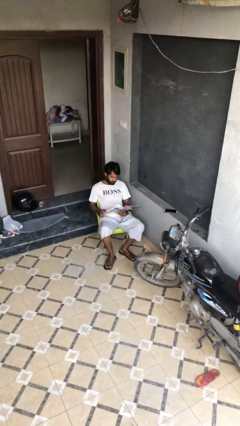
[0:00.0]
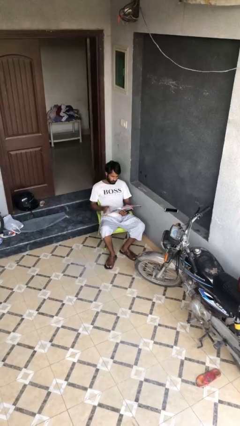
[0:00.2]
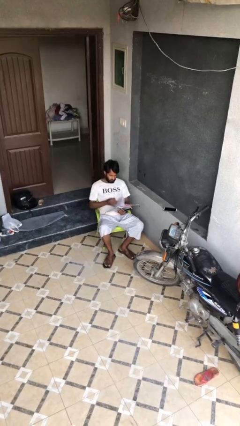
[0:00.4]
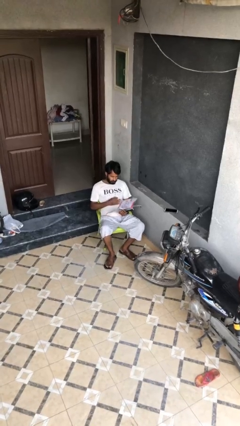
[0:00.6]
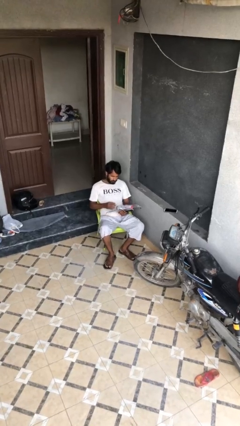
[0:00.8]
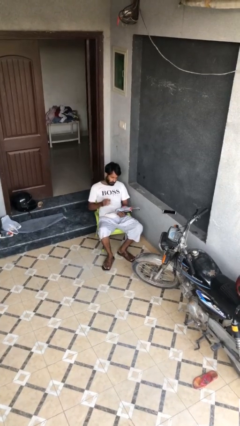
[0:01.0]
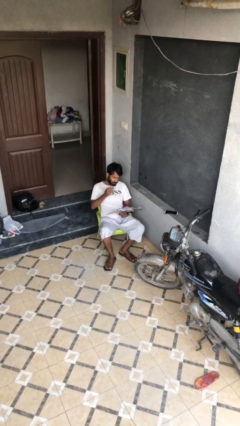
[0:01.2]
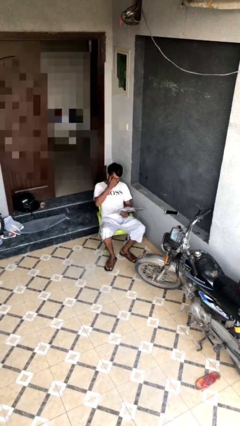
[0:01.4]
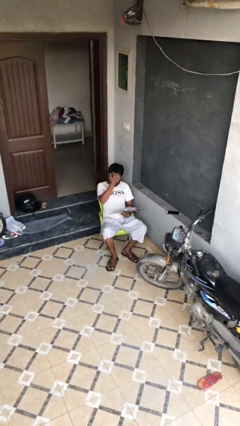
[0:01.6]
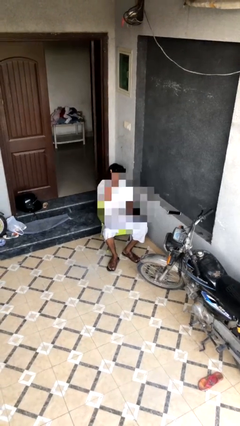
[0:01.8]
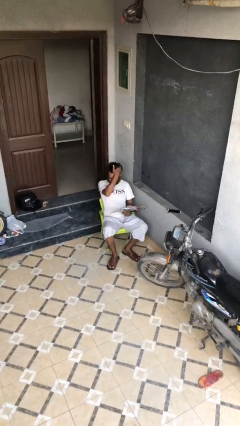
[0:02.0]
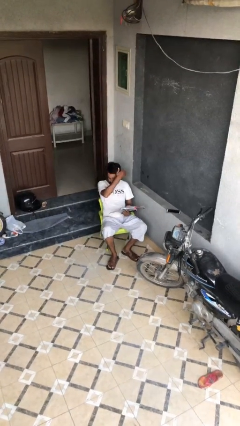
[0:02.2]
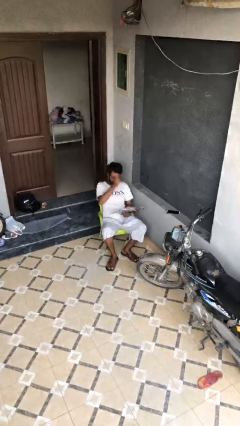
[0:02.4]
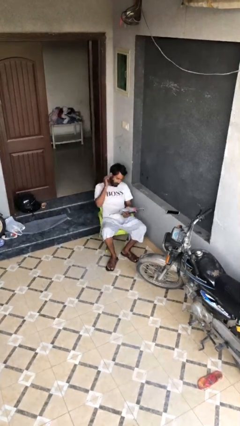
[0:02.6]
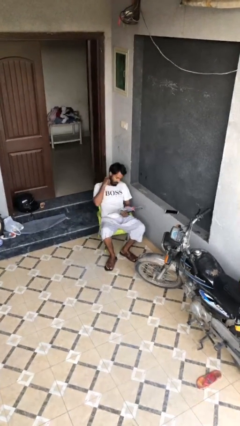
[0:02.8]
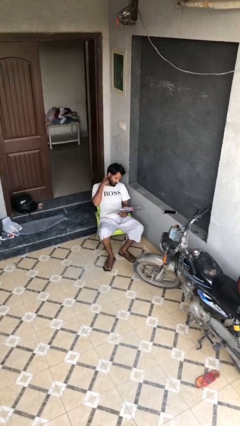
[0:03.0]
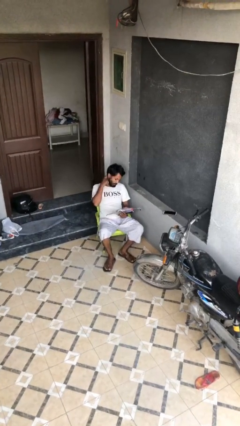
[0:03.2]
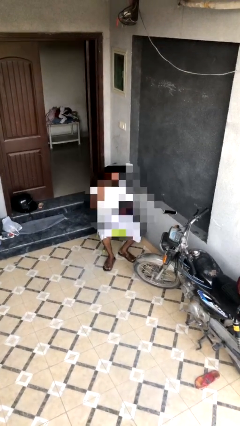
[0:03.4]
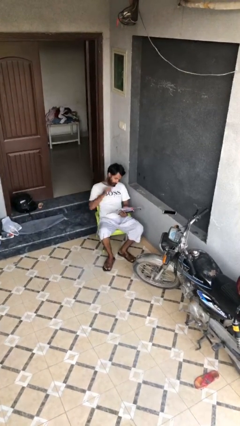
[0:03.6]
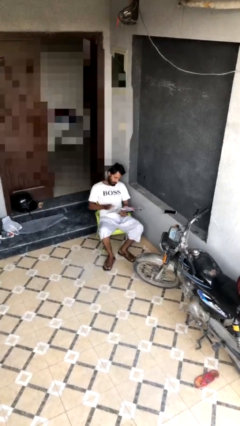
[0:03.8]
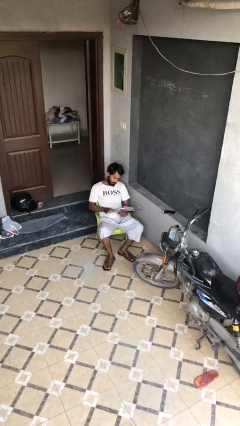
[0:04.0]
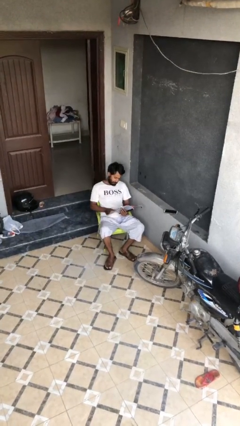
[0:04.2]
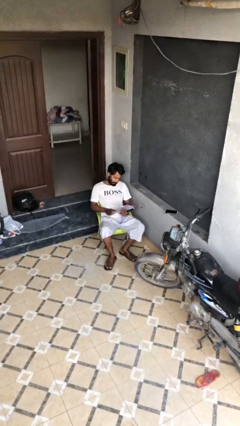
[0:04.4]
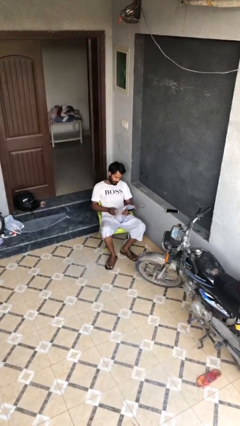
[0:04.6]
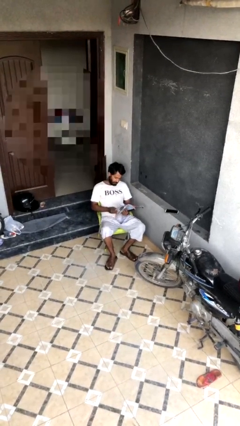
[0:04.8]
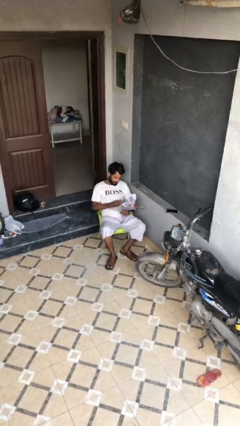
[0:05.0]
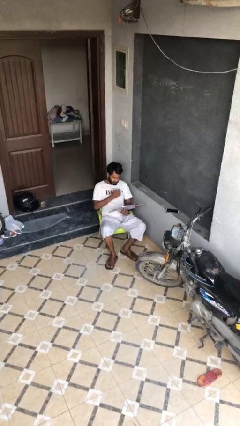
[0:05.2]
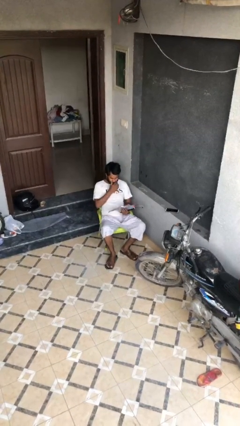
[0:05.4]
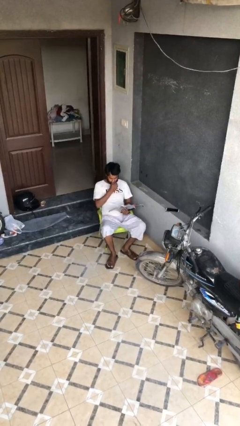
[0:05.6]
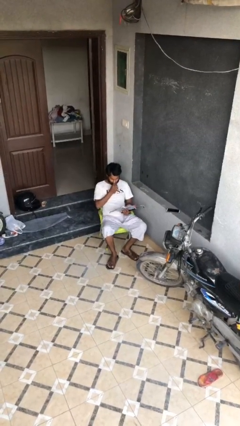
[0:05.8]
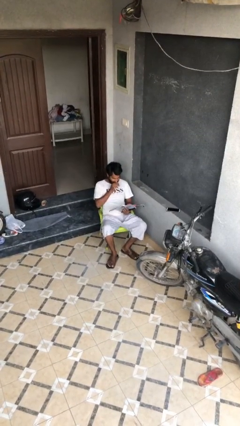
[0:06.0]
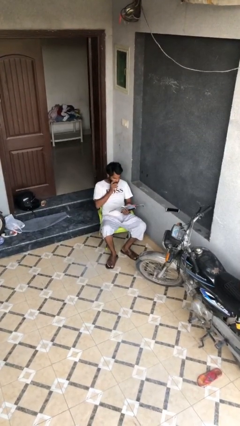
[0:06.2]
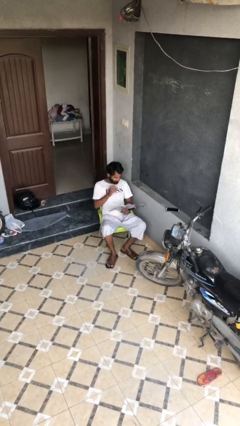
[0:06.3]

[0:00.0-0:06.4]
person reads document

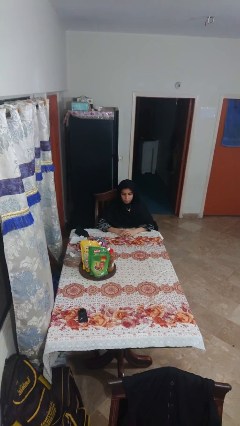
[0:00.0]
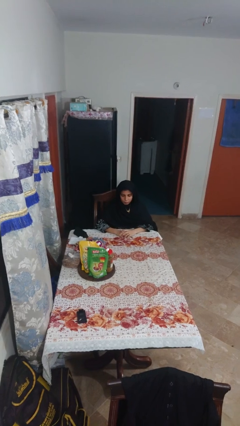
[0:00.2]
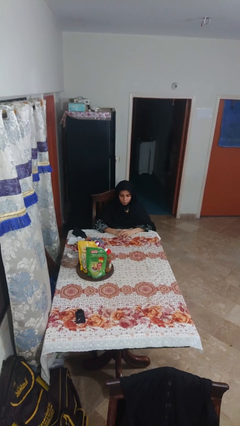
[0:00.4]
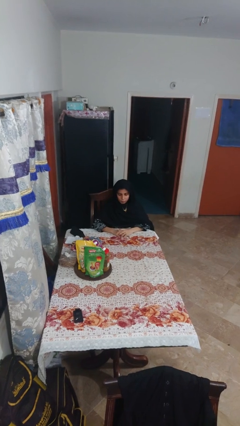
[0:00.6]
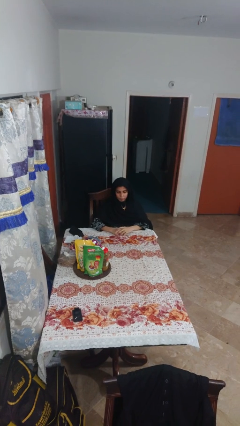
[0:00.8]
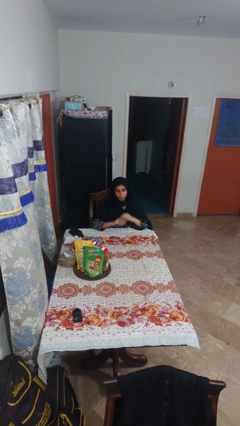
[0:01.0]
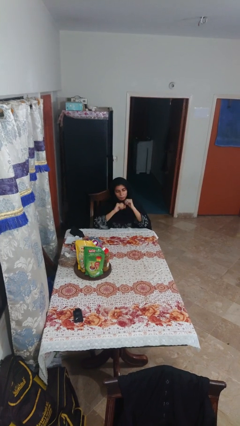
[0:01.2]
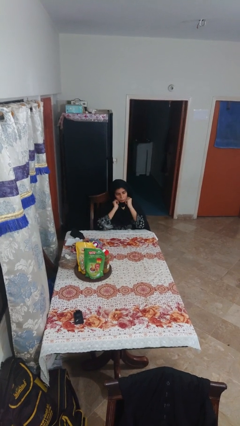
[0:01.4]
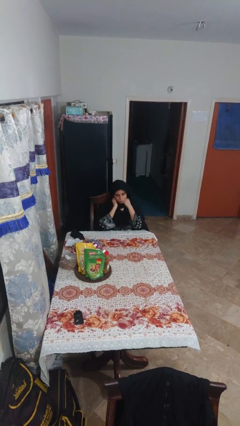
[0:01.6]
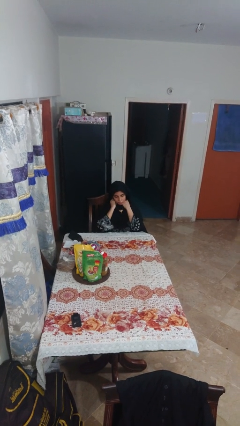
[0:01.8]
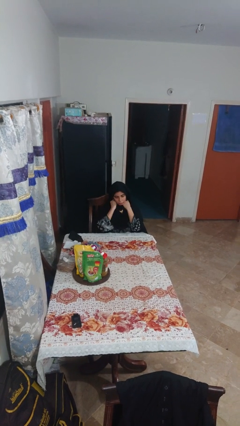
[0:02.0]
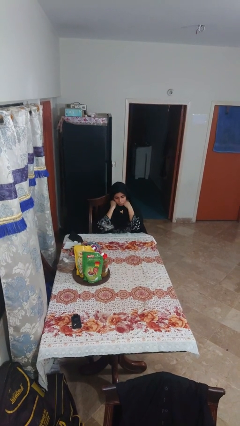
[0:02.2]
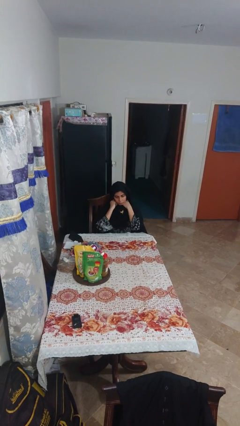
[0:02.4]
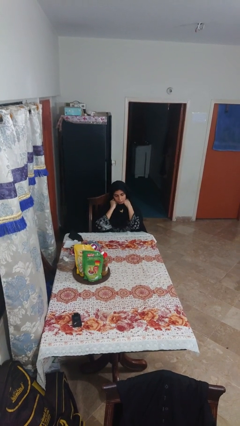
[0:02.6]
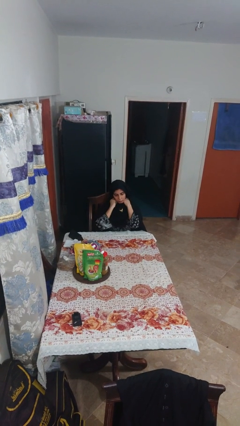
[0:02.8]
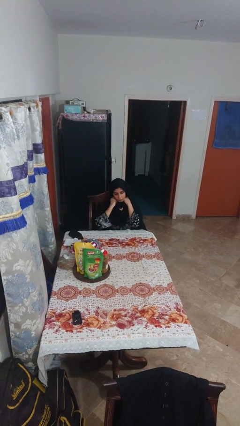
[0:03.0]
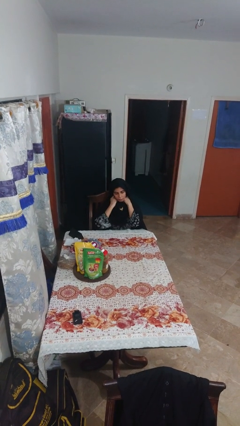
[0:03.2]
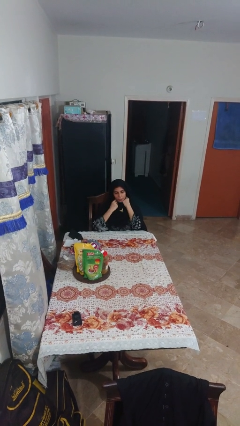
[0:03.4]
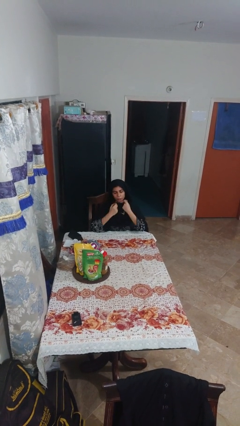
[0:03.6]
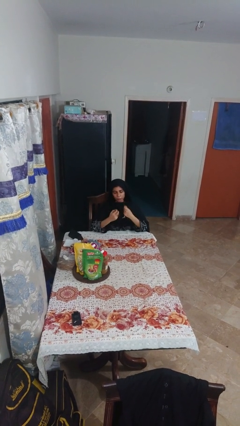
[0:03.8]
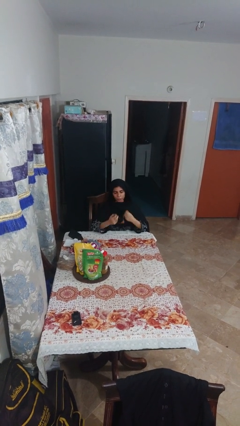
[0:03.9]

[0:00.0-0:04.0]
person takes off necklace

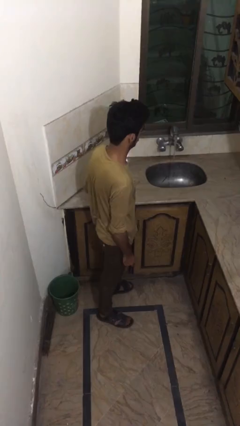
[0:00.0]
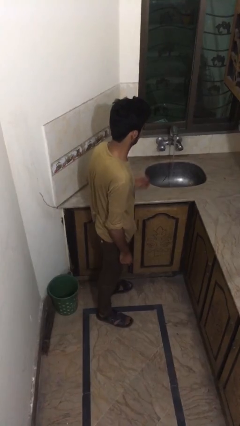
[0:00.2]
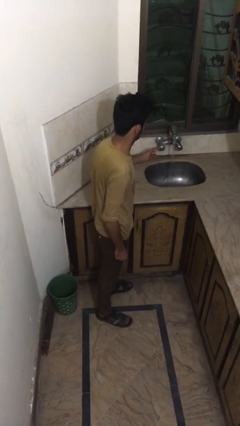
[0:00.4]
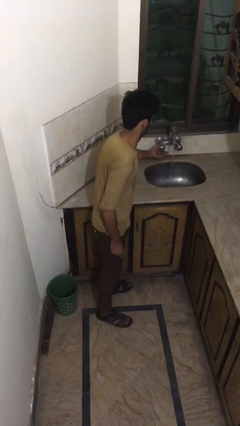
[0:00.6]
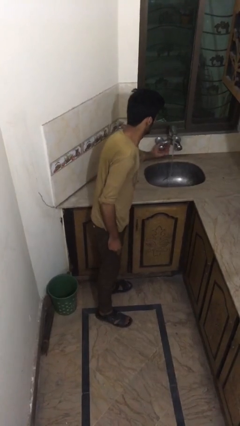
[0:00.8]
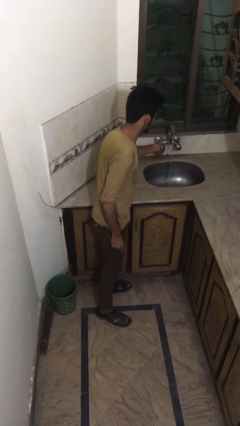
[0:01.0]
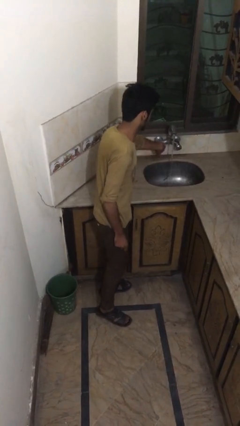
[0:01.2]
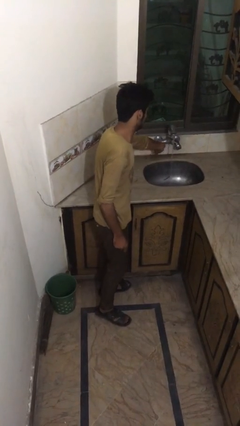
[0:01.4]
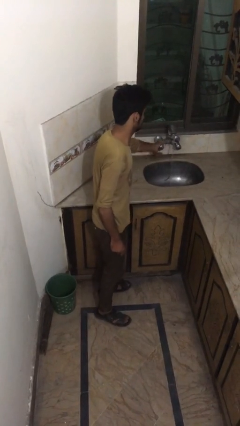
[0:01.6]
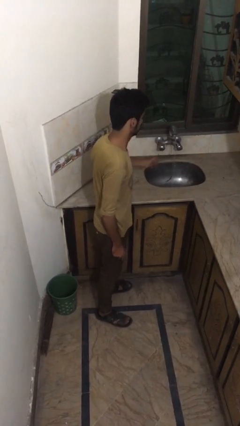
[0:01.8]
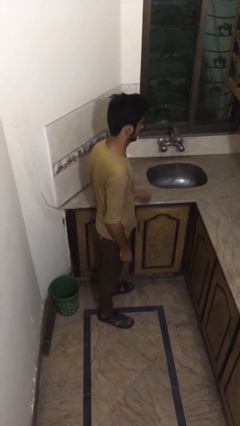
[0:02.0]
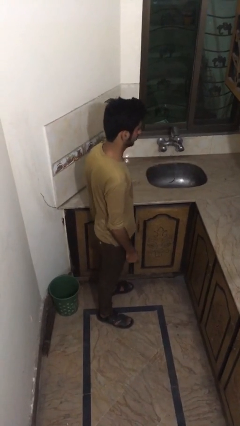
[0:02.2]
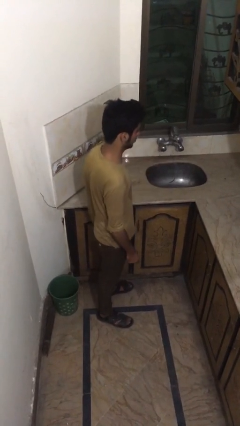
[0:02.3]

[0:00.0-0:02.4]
person turns off faucet

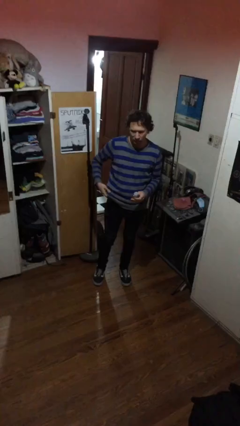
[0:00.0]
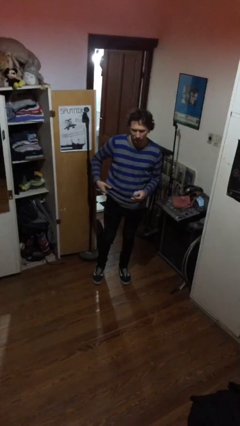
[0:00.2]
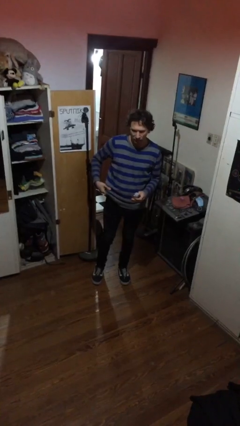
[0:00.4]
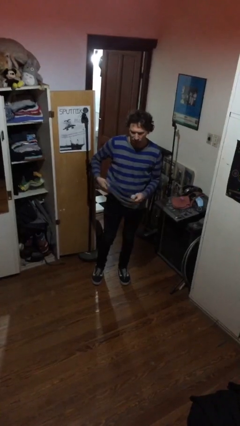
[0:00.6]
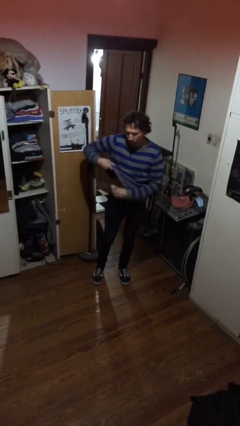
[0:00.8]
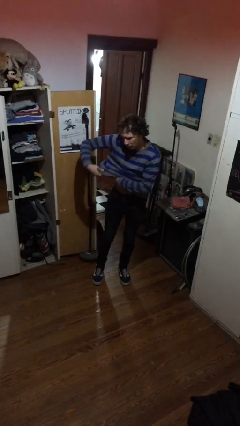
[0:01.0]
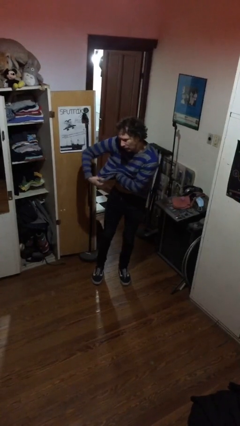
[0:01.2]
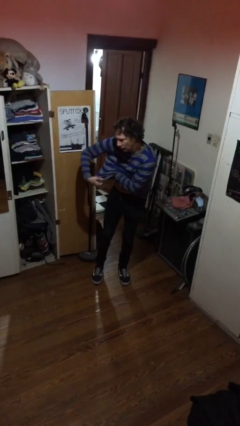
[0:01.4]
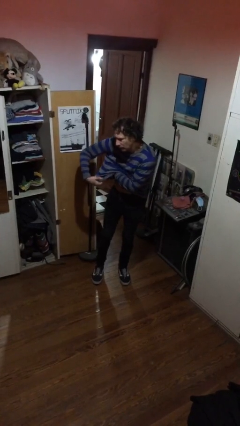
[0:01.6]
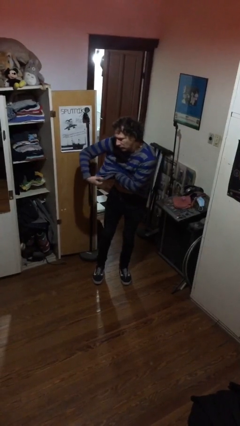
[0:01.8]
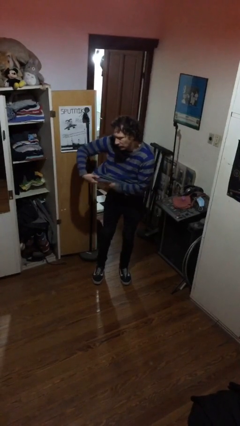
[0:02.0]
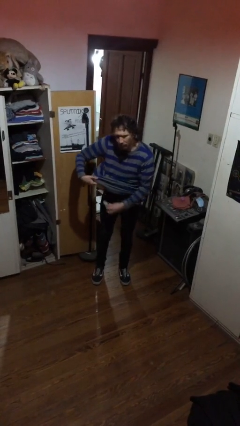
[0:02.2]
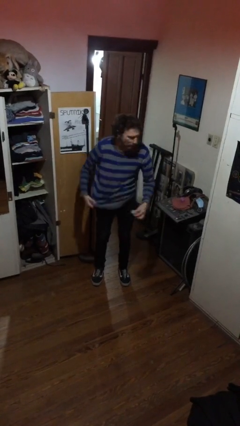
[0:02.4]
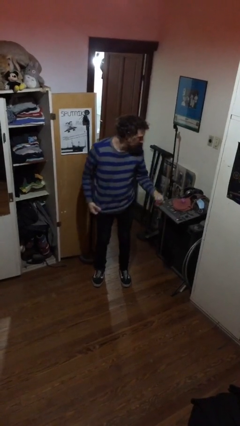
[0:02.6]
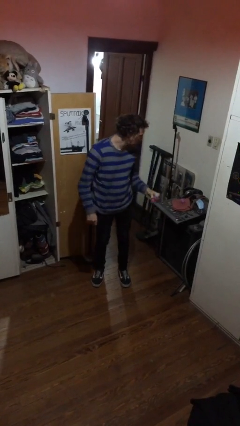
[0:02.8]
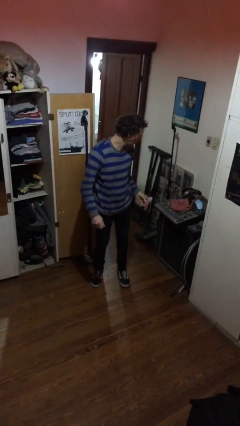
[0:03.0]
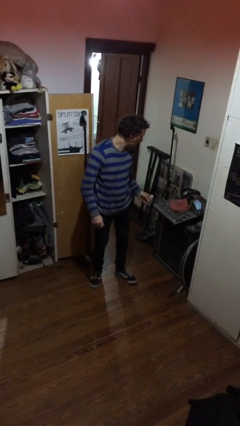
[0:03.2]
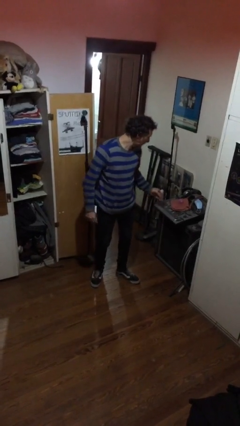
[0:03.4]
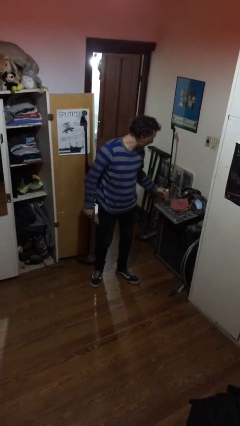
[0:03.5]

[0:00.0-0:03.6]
person applies deodorant

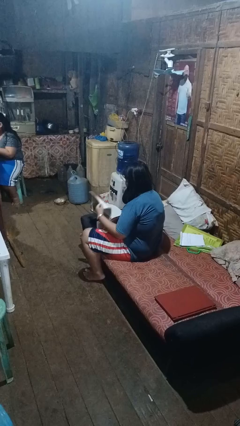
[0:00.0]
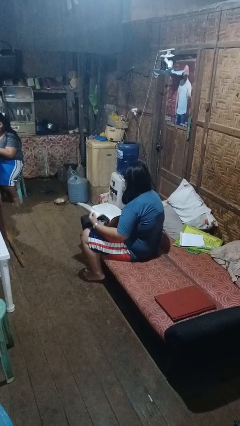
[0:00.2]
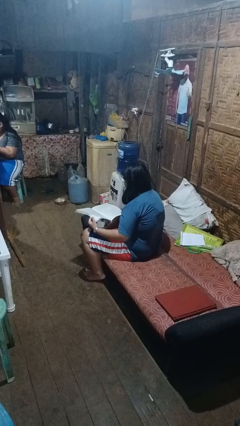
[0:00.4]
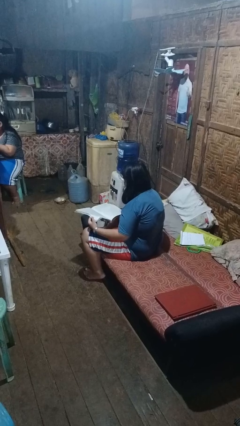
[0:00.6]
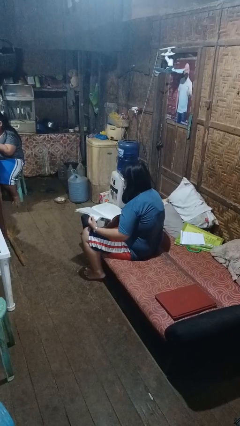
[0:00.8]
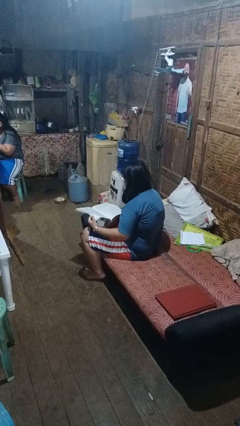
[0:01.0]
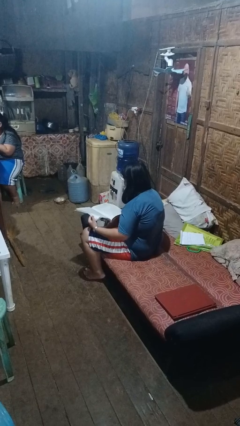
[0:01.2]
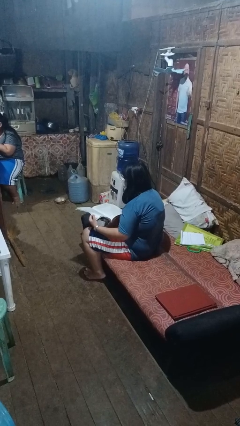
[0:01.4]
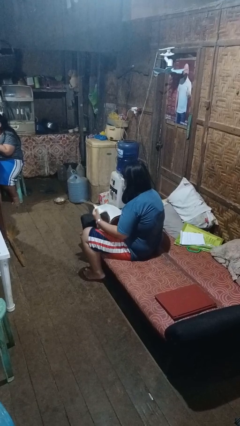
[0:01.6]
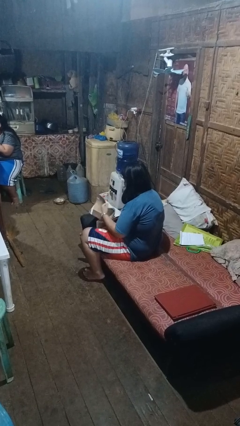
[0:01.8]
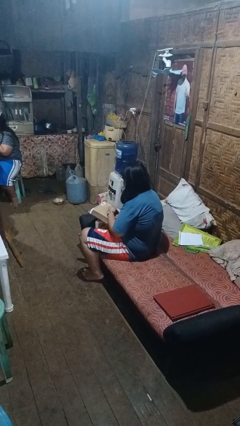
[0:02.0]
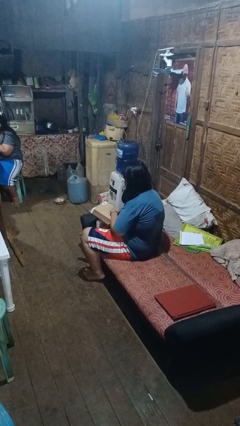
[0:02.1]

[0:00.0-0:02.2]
person reads book
